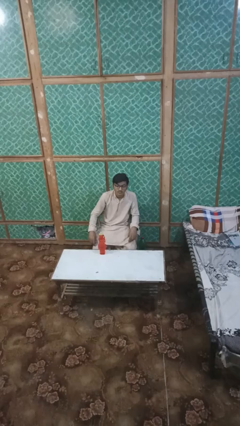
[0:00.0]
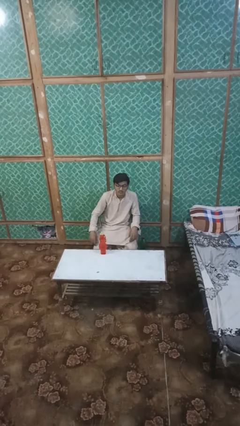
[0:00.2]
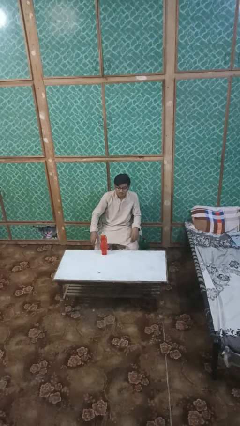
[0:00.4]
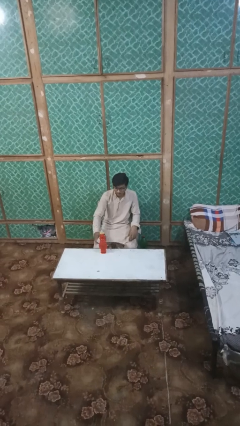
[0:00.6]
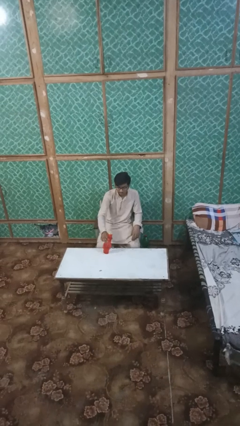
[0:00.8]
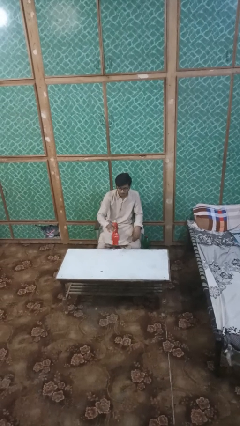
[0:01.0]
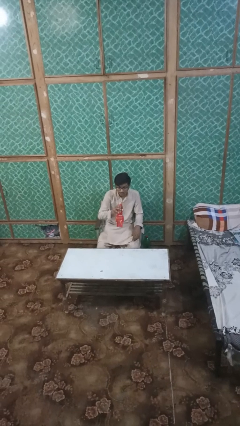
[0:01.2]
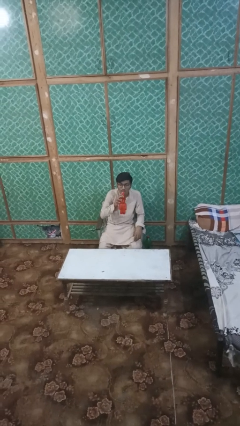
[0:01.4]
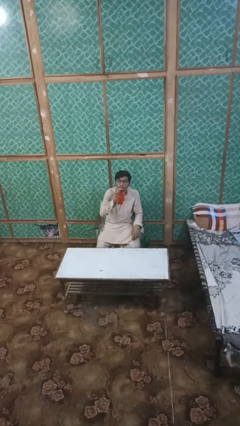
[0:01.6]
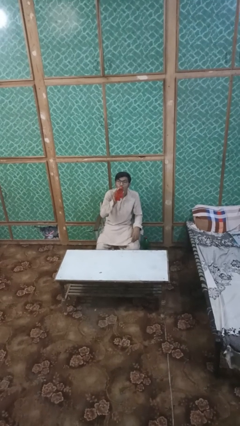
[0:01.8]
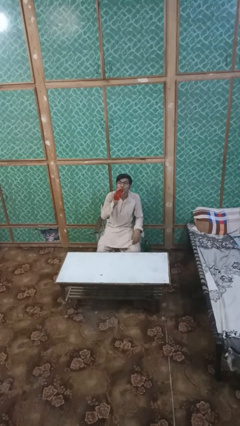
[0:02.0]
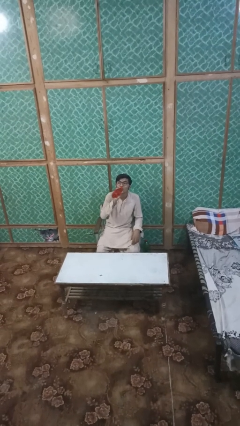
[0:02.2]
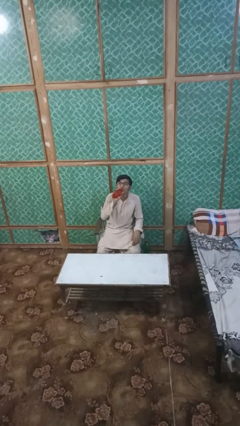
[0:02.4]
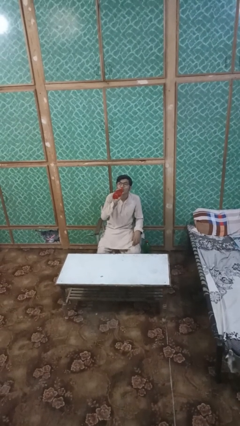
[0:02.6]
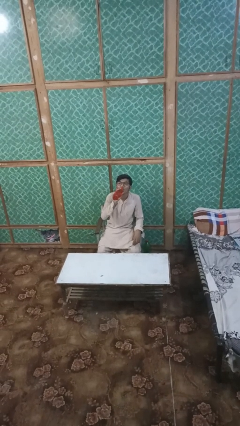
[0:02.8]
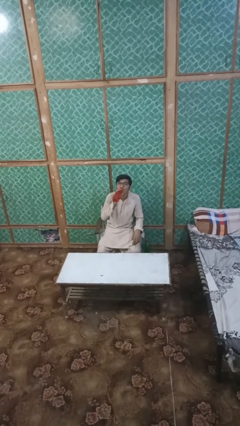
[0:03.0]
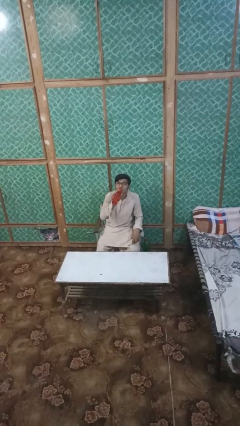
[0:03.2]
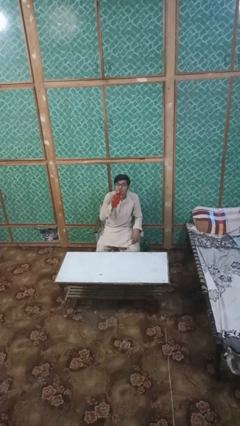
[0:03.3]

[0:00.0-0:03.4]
person drinks from bottle

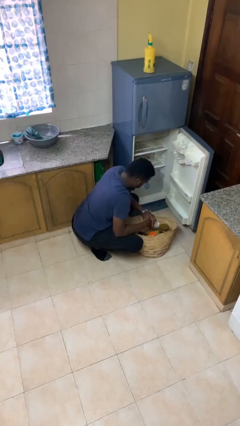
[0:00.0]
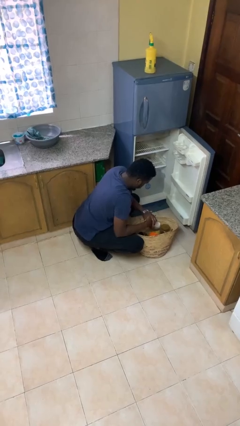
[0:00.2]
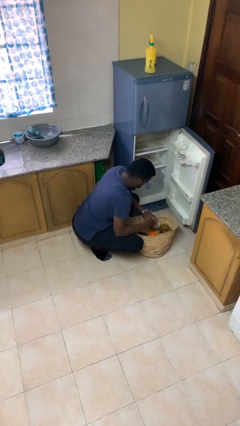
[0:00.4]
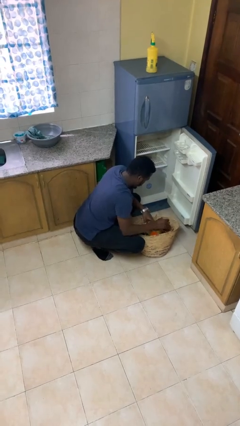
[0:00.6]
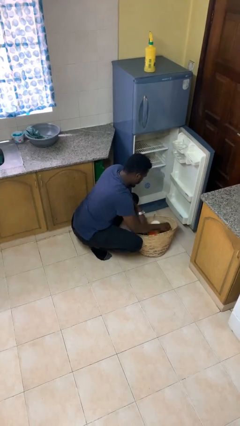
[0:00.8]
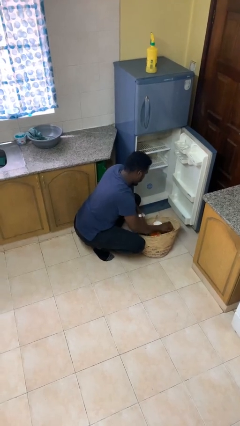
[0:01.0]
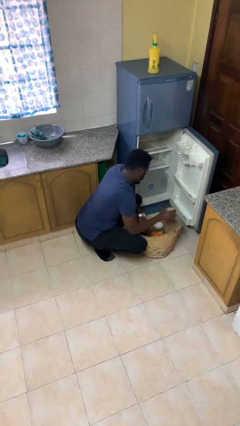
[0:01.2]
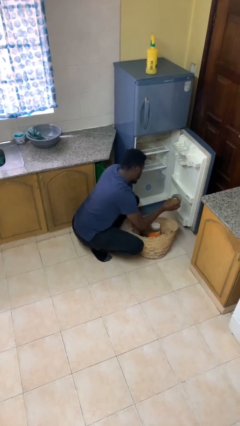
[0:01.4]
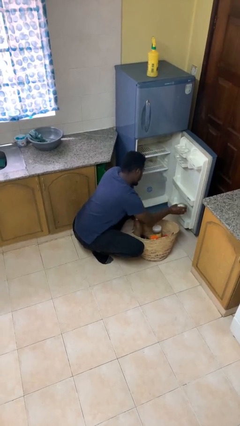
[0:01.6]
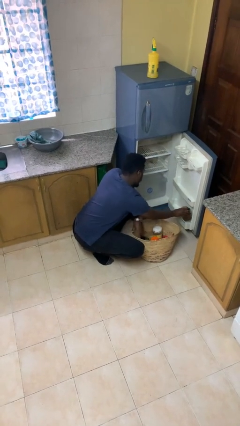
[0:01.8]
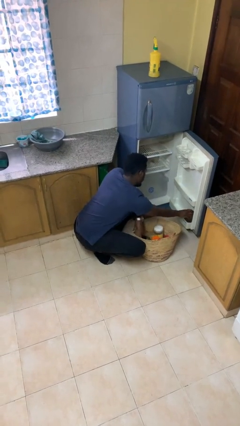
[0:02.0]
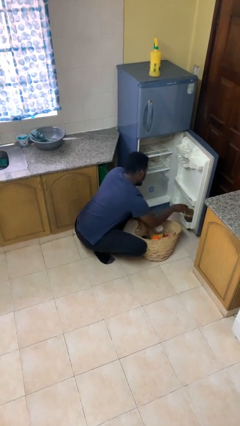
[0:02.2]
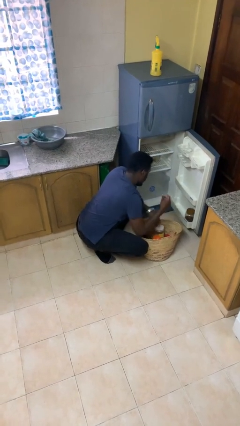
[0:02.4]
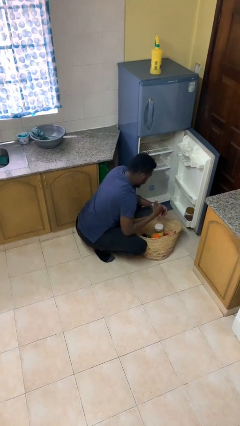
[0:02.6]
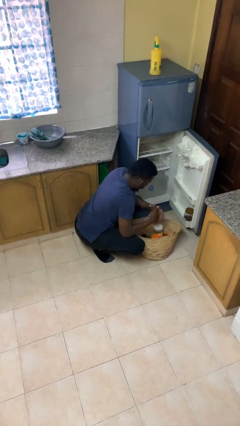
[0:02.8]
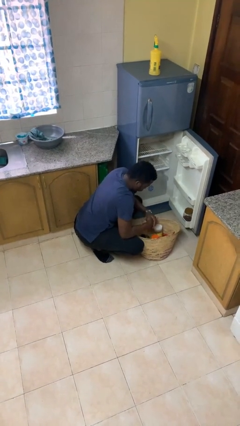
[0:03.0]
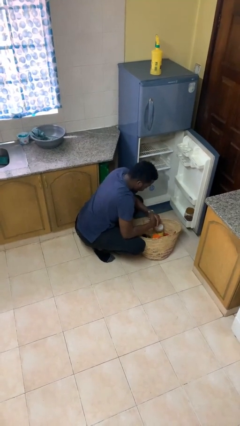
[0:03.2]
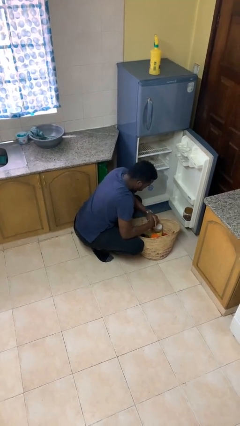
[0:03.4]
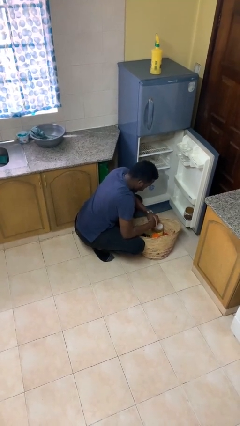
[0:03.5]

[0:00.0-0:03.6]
person loads groceries into refrigerator

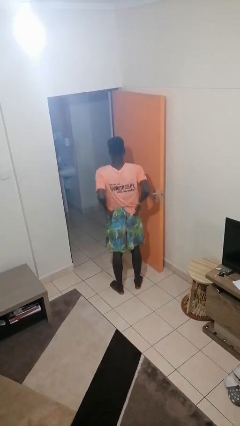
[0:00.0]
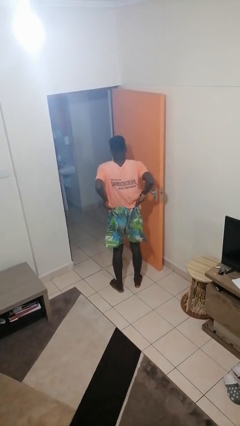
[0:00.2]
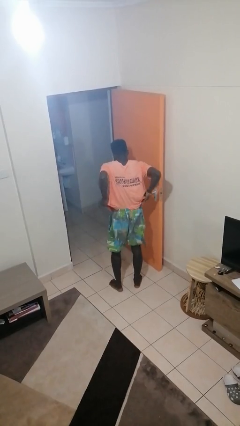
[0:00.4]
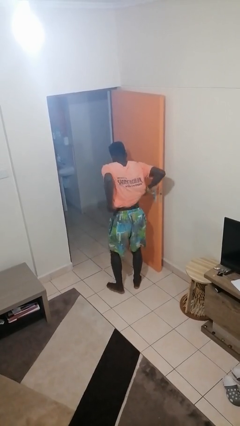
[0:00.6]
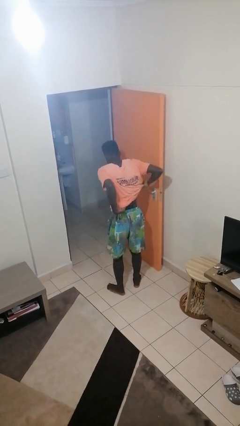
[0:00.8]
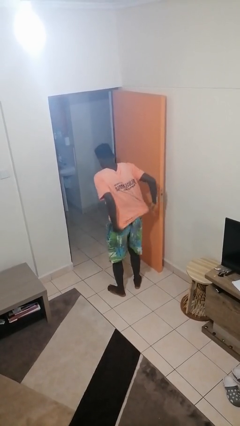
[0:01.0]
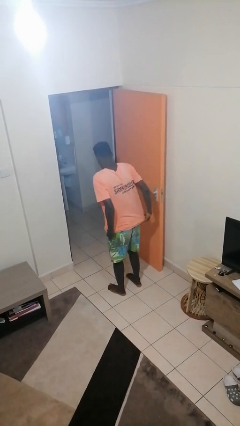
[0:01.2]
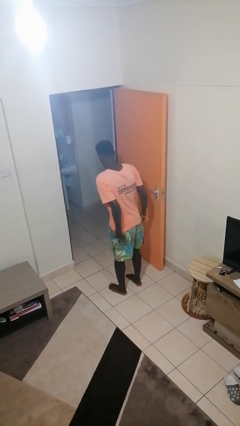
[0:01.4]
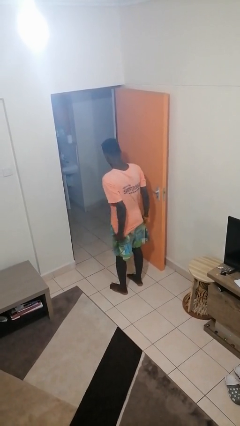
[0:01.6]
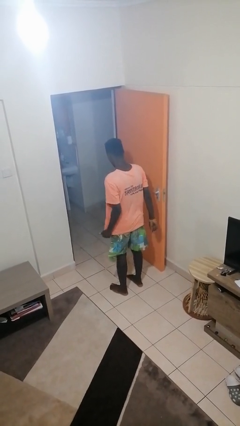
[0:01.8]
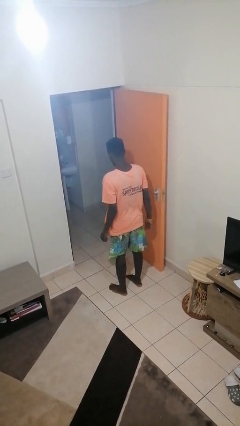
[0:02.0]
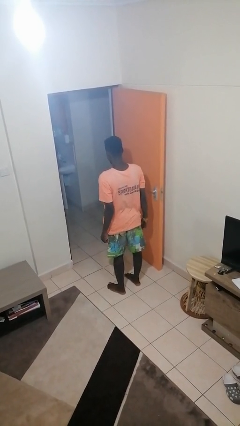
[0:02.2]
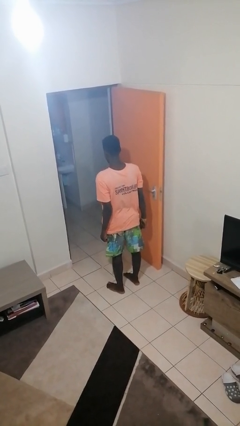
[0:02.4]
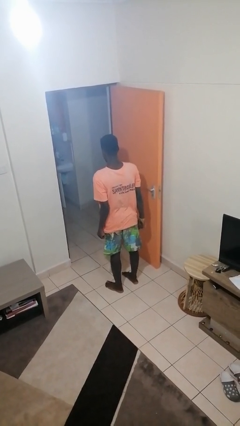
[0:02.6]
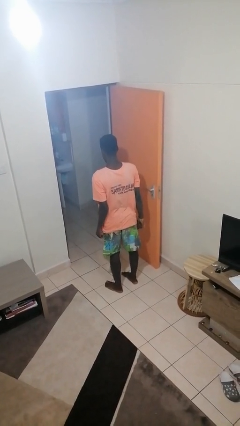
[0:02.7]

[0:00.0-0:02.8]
person untucks shirt

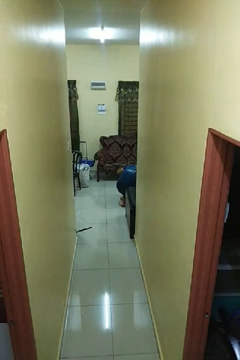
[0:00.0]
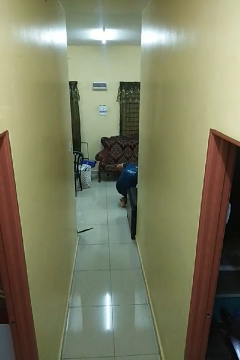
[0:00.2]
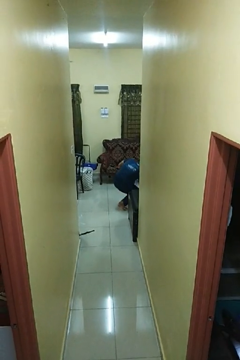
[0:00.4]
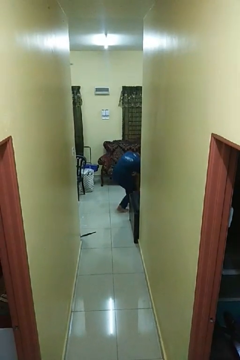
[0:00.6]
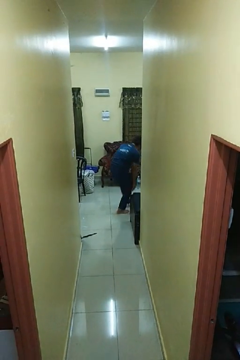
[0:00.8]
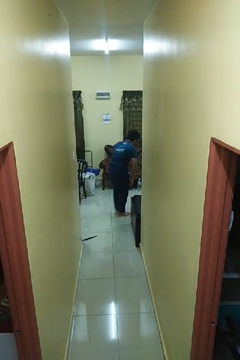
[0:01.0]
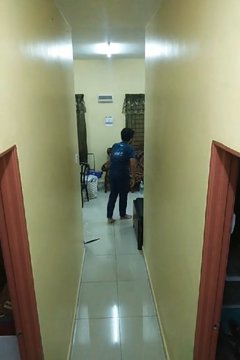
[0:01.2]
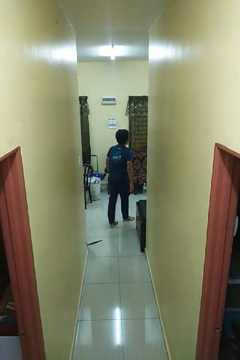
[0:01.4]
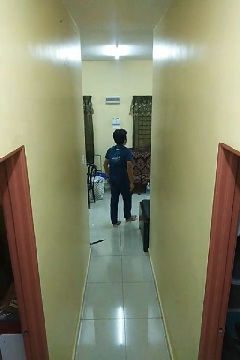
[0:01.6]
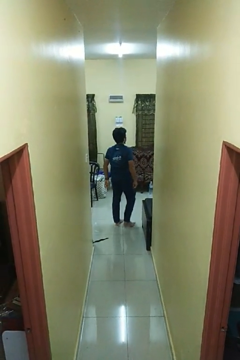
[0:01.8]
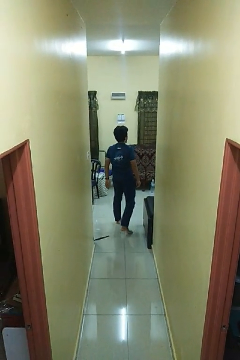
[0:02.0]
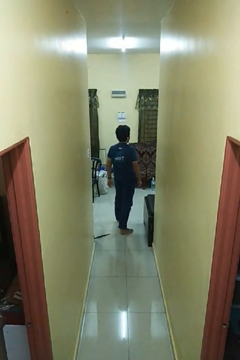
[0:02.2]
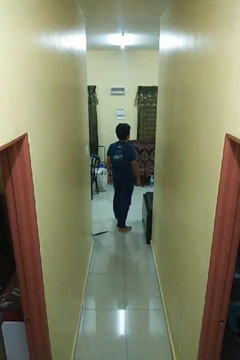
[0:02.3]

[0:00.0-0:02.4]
person stands up from floor

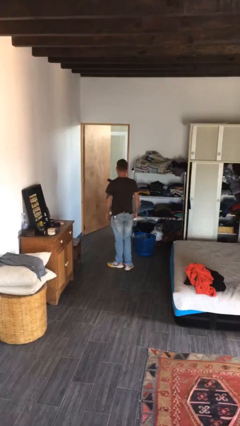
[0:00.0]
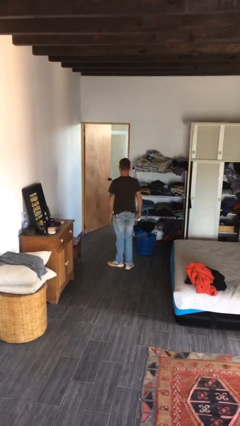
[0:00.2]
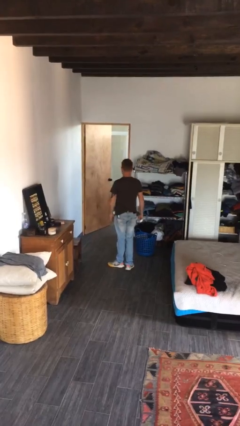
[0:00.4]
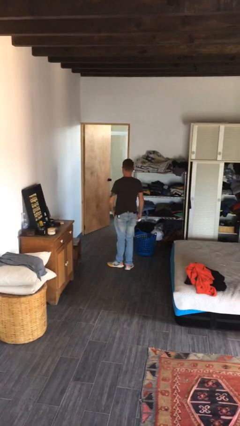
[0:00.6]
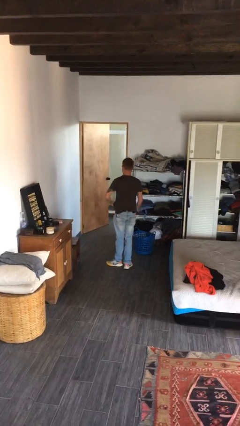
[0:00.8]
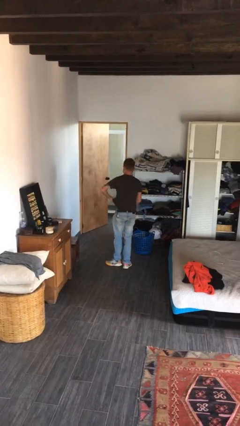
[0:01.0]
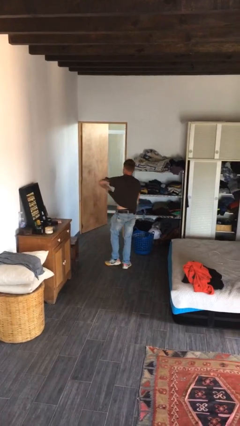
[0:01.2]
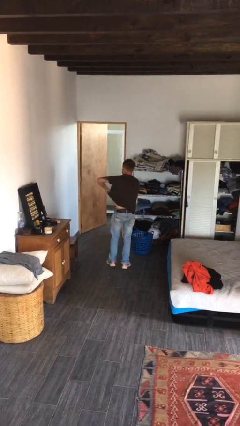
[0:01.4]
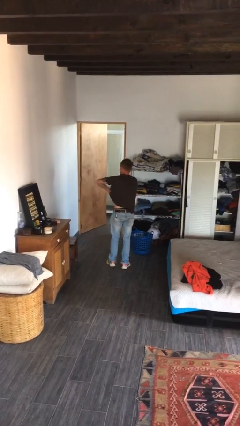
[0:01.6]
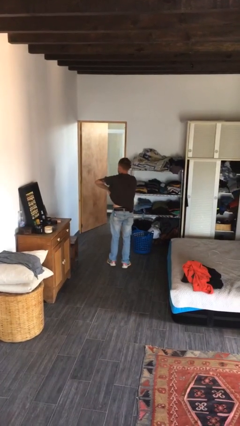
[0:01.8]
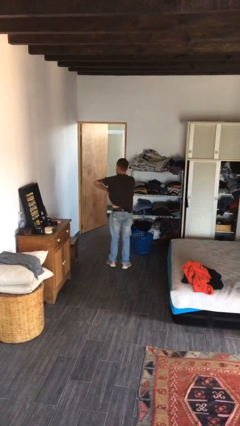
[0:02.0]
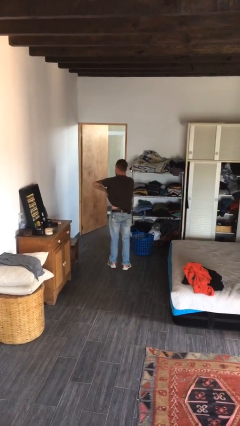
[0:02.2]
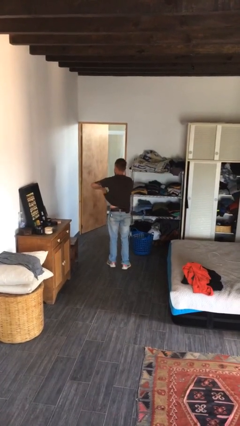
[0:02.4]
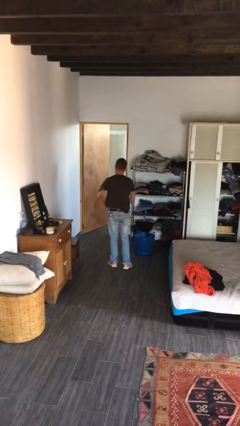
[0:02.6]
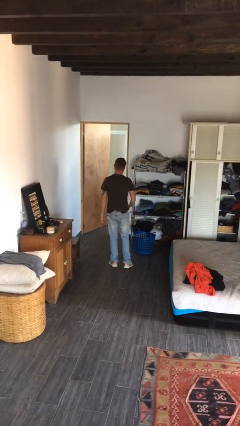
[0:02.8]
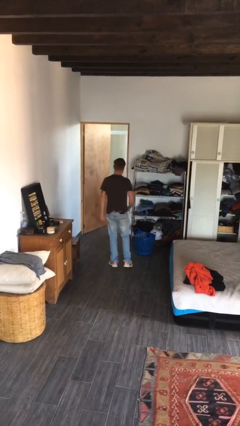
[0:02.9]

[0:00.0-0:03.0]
person applies deodorant

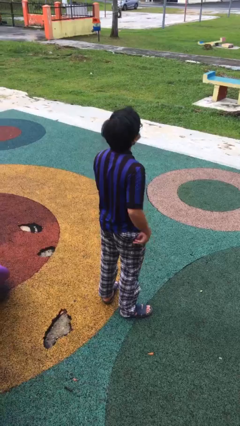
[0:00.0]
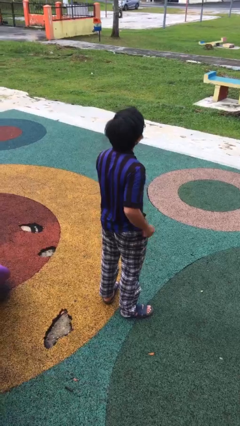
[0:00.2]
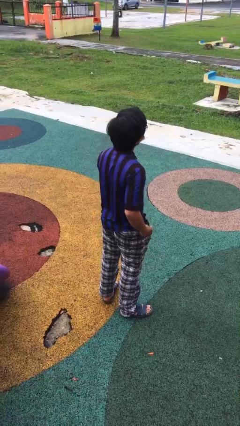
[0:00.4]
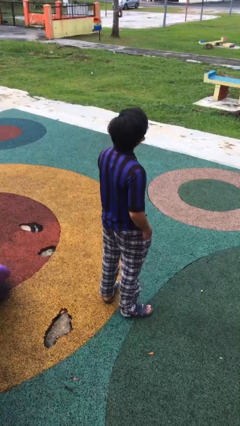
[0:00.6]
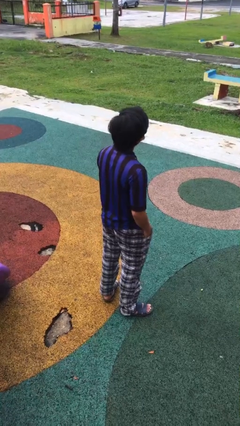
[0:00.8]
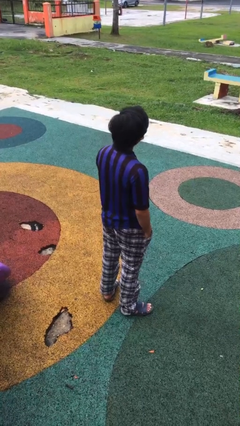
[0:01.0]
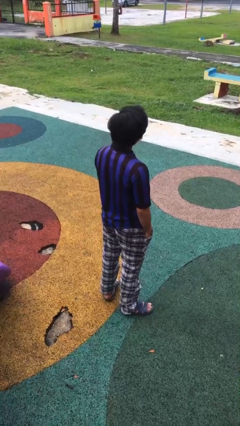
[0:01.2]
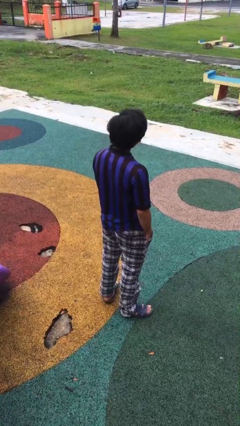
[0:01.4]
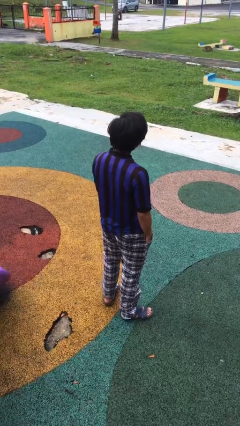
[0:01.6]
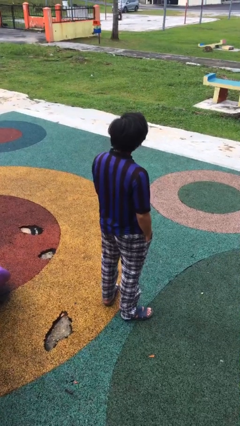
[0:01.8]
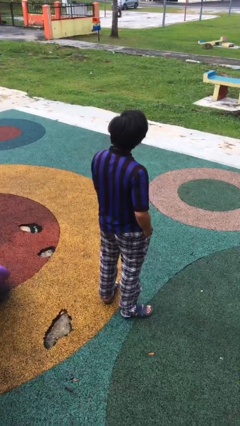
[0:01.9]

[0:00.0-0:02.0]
person puts hands in back pockets

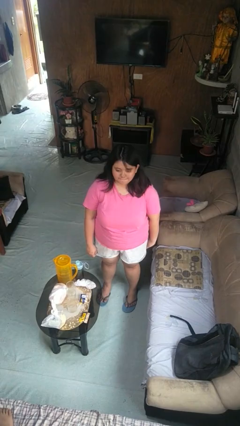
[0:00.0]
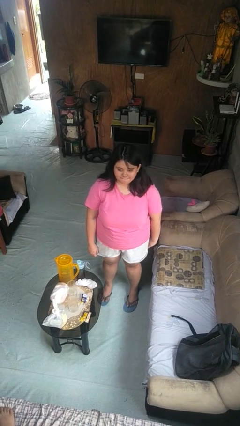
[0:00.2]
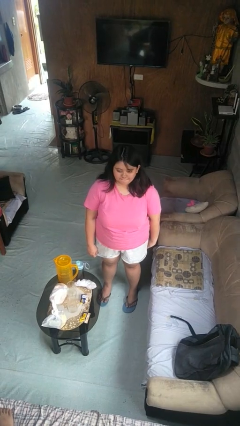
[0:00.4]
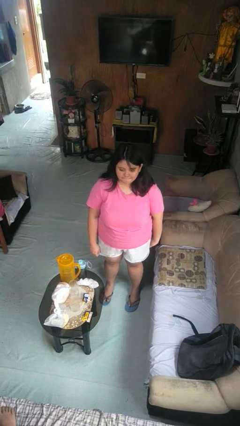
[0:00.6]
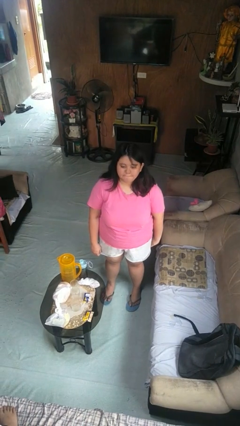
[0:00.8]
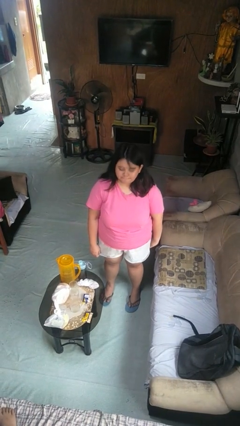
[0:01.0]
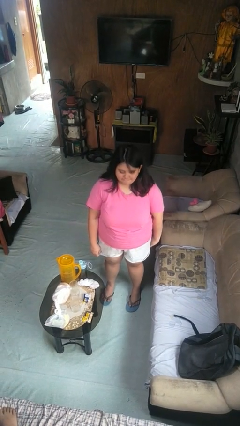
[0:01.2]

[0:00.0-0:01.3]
person nods head
